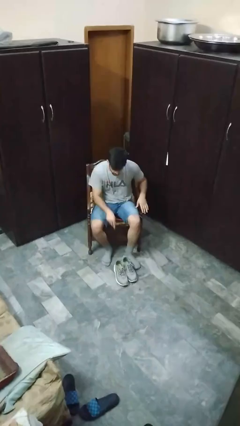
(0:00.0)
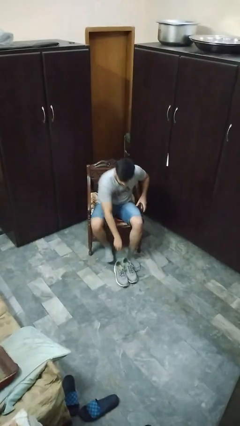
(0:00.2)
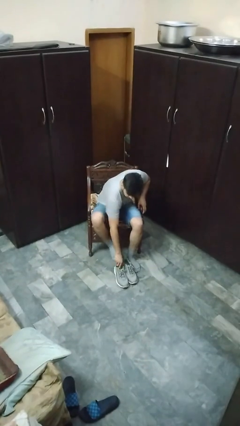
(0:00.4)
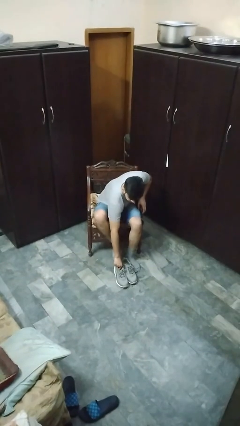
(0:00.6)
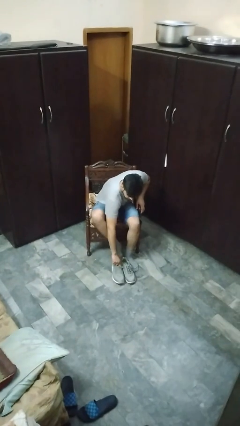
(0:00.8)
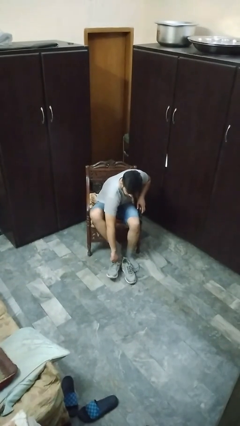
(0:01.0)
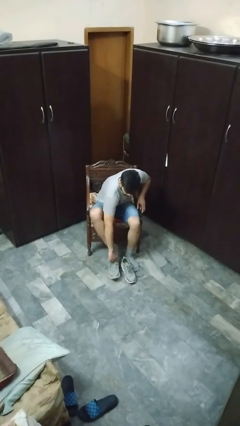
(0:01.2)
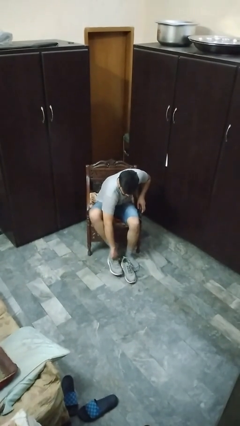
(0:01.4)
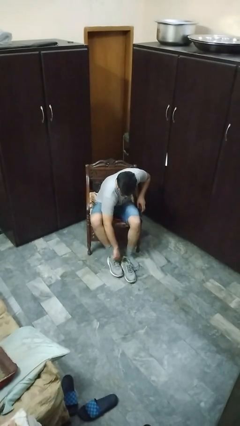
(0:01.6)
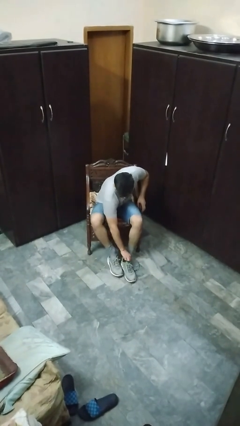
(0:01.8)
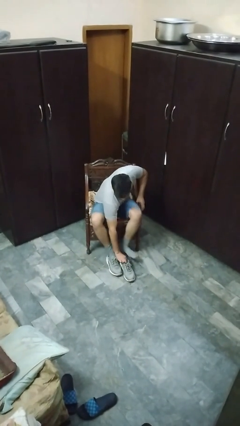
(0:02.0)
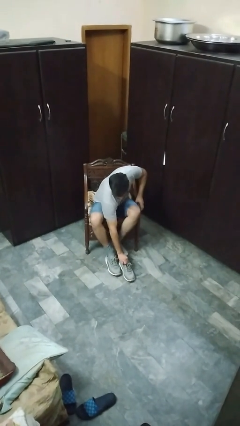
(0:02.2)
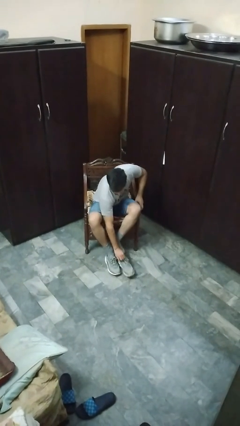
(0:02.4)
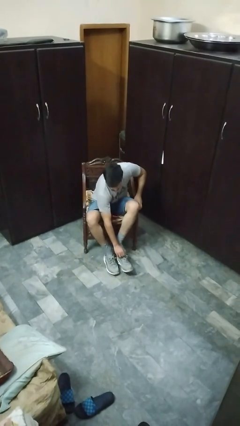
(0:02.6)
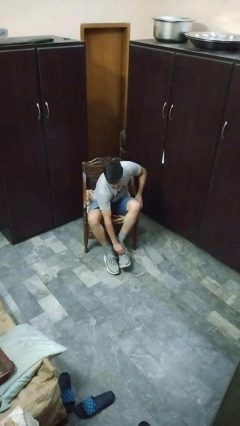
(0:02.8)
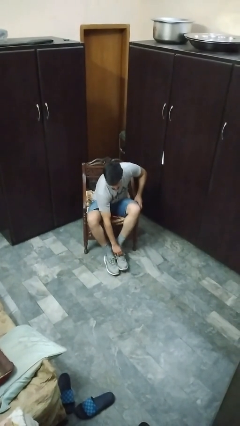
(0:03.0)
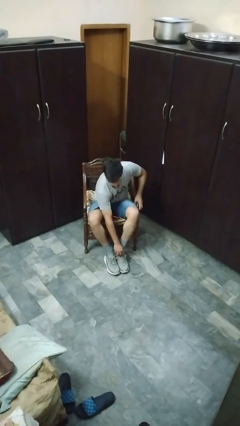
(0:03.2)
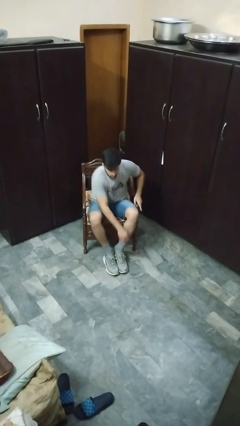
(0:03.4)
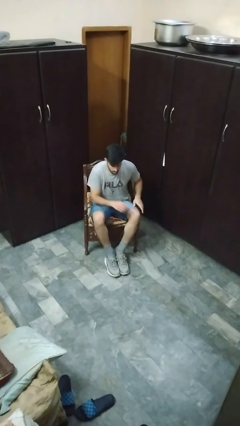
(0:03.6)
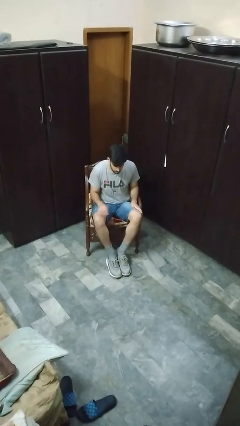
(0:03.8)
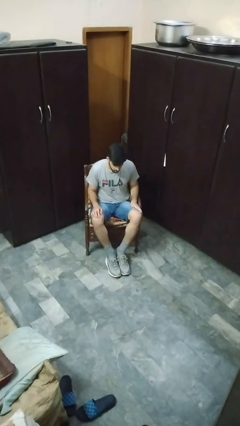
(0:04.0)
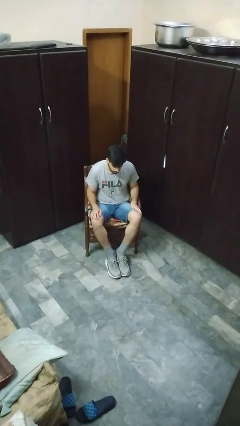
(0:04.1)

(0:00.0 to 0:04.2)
person puts on shoes

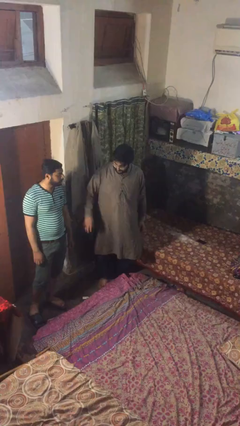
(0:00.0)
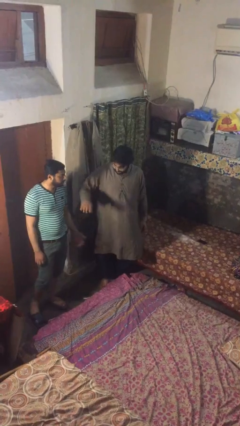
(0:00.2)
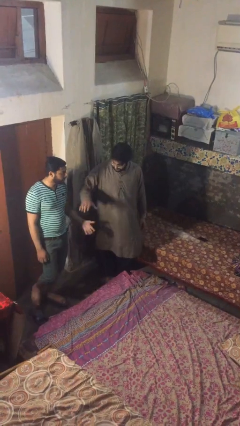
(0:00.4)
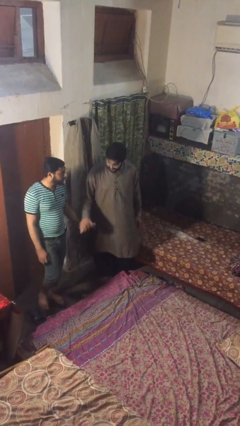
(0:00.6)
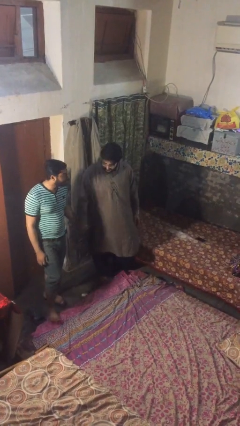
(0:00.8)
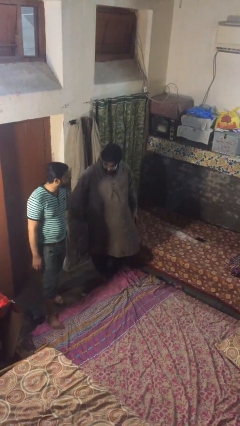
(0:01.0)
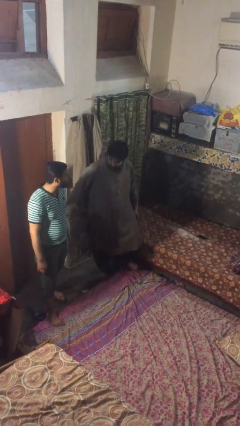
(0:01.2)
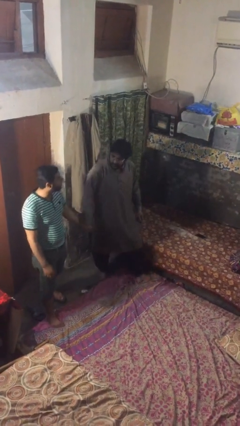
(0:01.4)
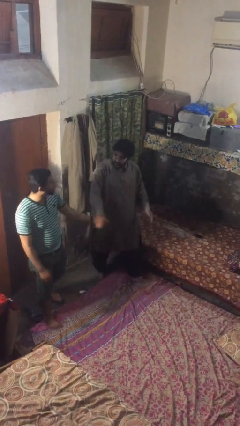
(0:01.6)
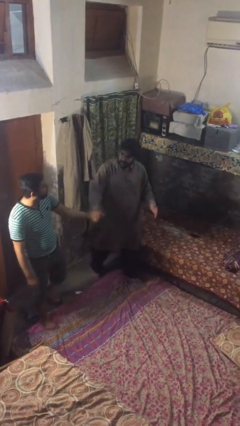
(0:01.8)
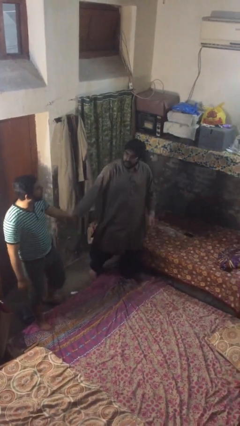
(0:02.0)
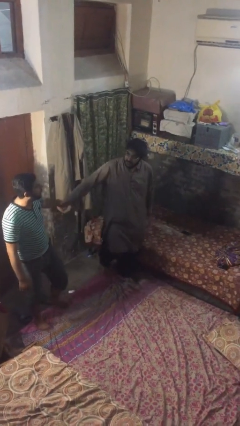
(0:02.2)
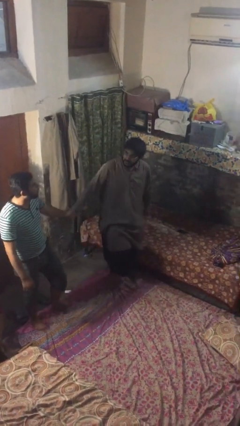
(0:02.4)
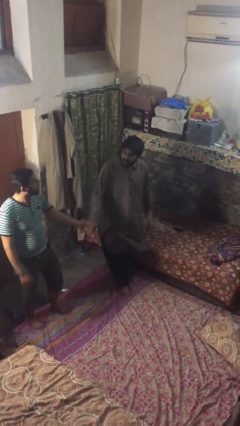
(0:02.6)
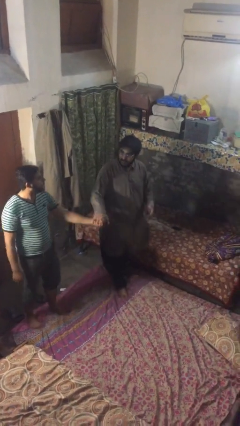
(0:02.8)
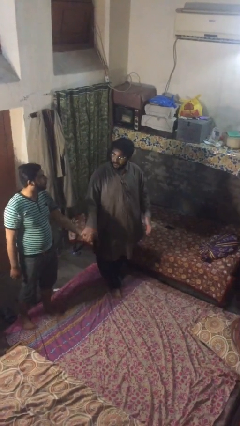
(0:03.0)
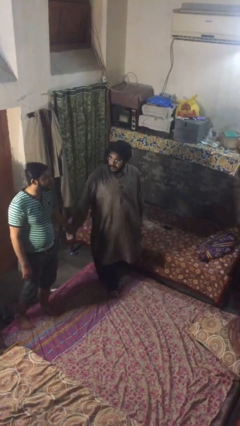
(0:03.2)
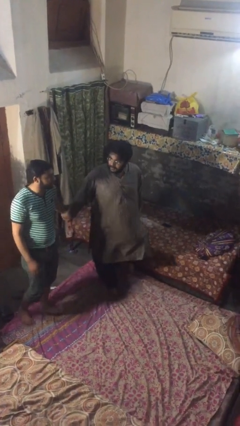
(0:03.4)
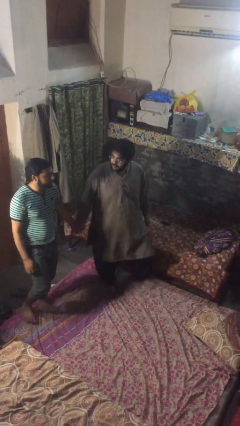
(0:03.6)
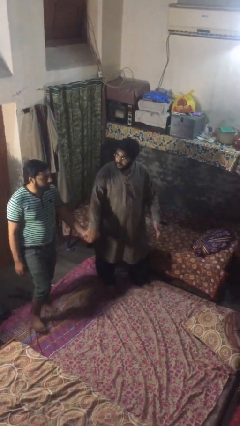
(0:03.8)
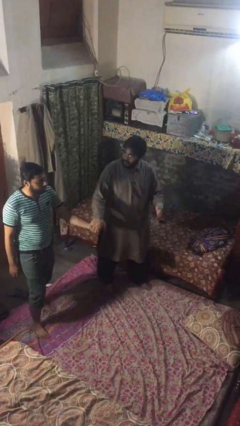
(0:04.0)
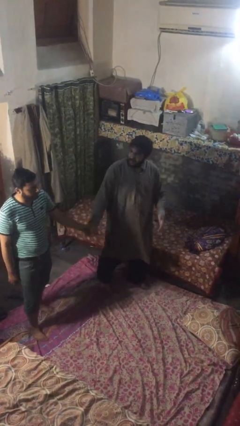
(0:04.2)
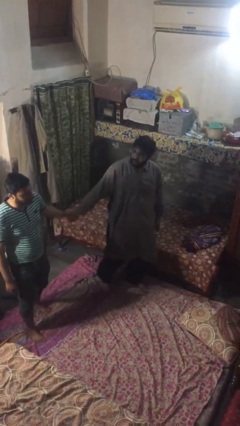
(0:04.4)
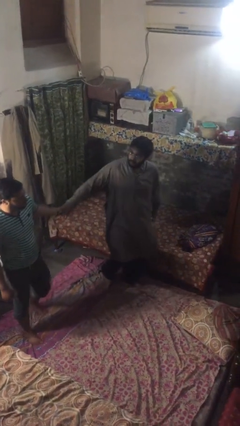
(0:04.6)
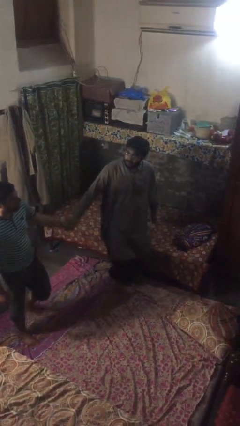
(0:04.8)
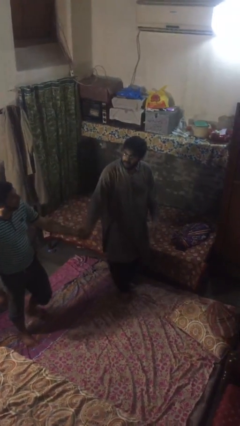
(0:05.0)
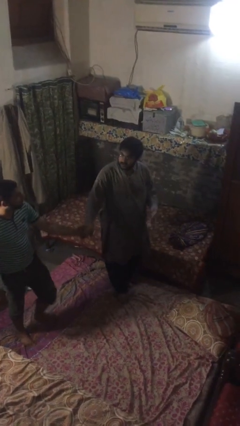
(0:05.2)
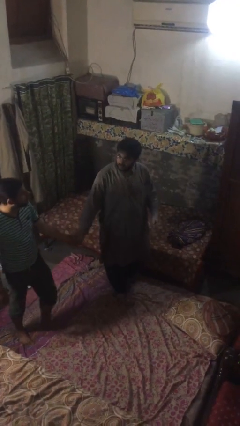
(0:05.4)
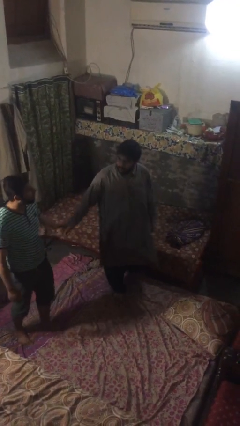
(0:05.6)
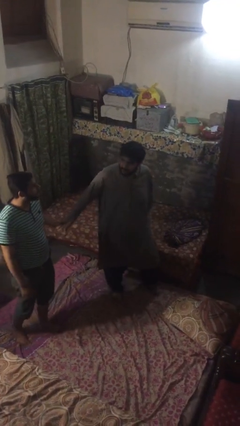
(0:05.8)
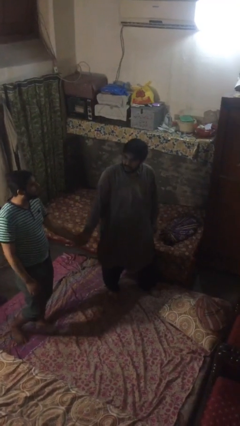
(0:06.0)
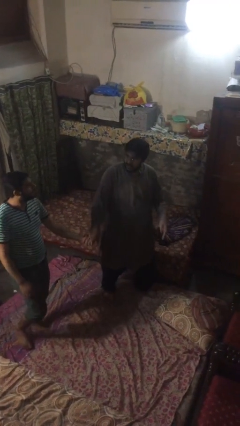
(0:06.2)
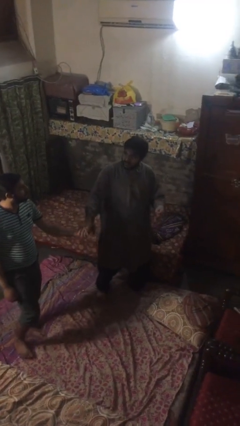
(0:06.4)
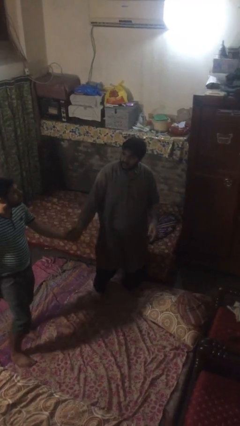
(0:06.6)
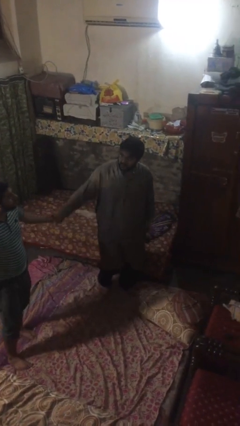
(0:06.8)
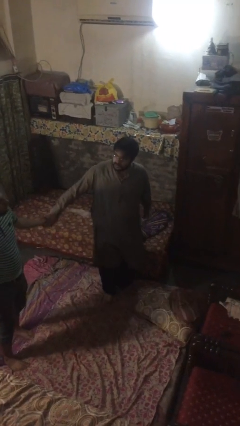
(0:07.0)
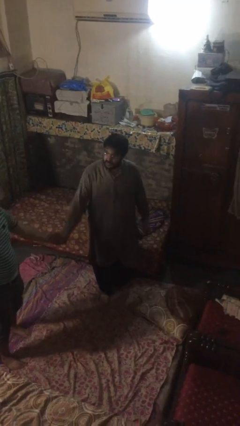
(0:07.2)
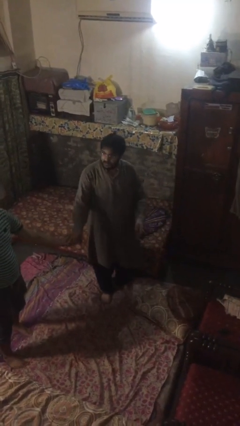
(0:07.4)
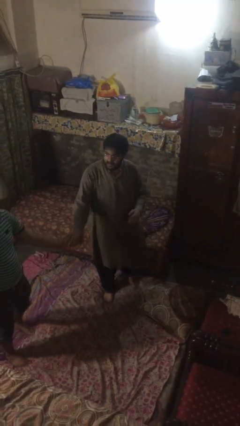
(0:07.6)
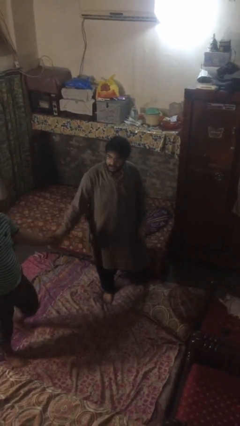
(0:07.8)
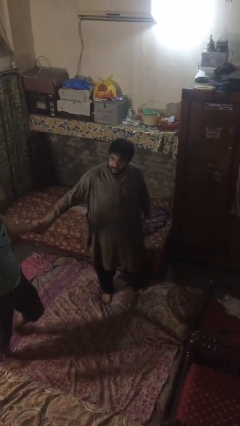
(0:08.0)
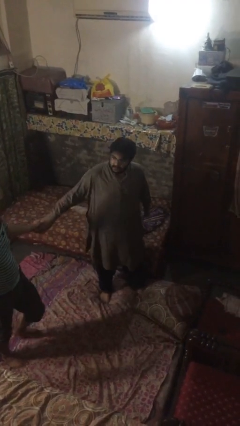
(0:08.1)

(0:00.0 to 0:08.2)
person holds hand

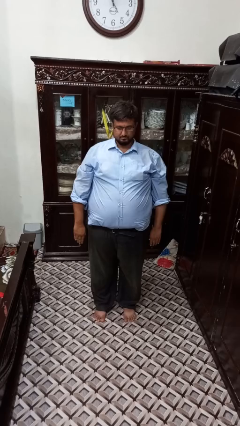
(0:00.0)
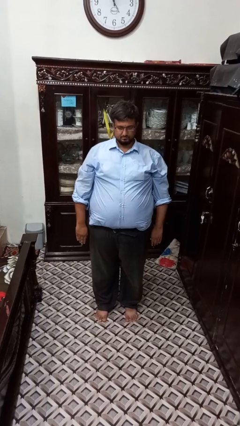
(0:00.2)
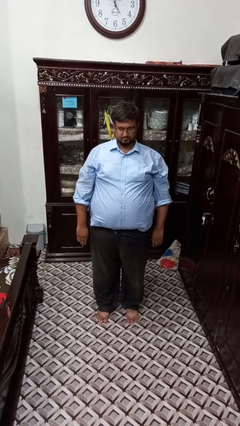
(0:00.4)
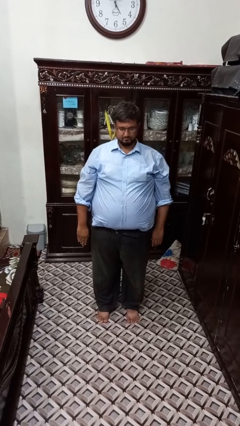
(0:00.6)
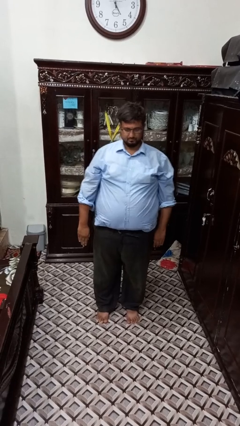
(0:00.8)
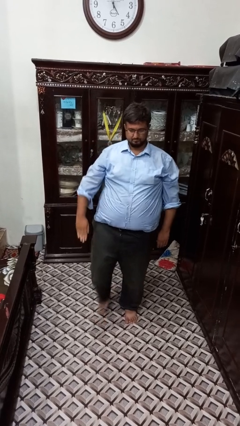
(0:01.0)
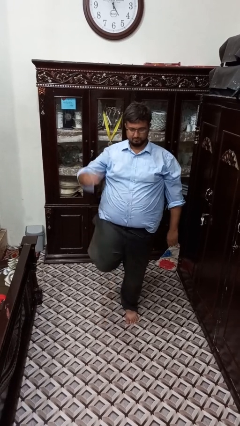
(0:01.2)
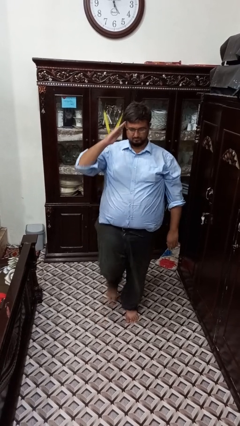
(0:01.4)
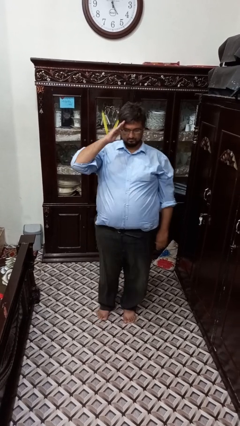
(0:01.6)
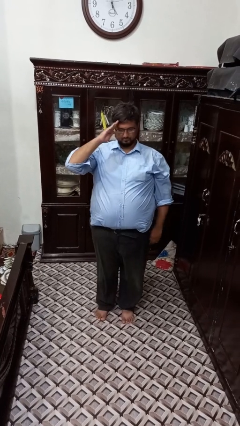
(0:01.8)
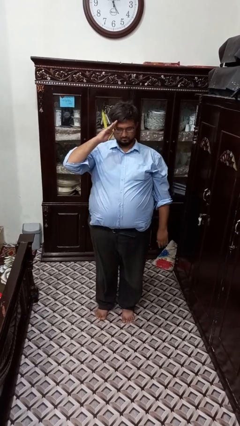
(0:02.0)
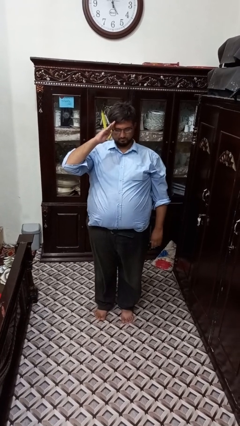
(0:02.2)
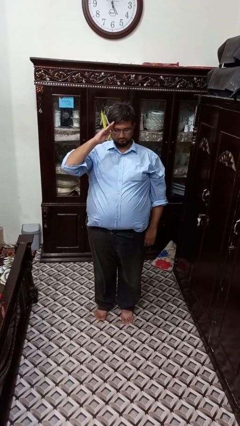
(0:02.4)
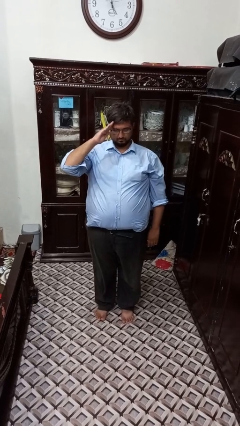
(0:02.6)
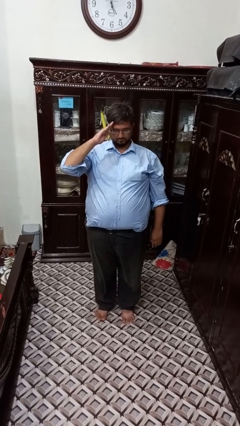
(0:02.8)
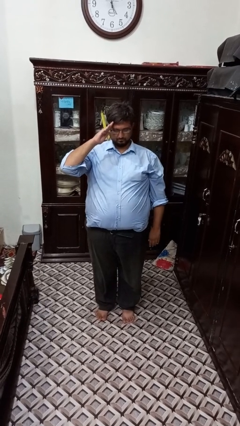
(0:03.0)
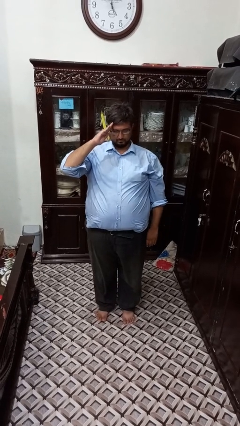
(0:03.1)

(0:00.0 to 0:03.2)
person salutes

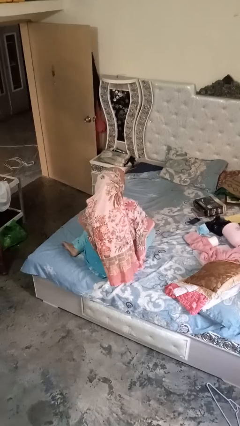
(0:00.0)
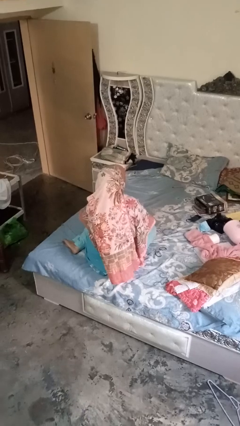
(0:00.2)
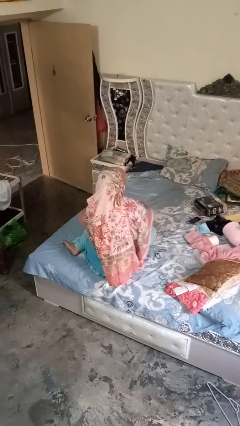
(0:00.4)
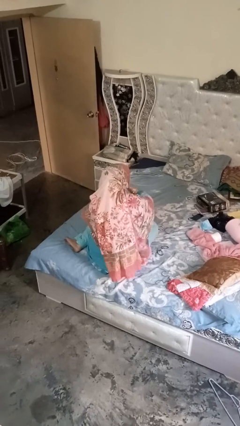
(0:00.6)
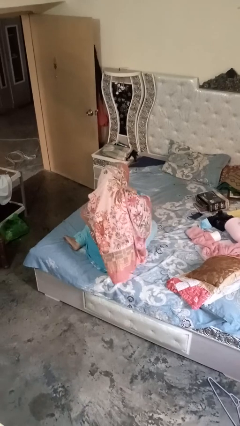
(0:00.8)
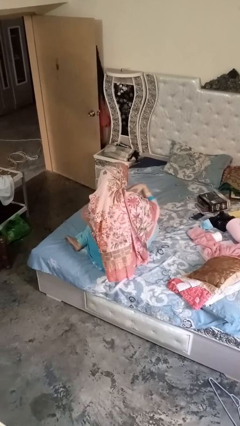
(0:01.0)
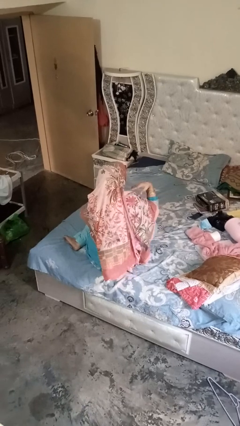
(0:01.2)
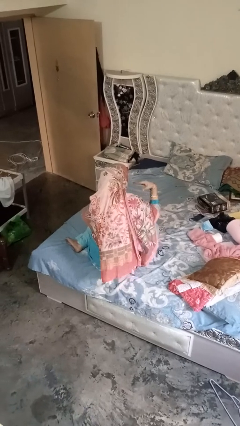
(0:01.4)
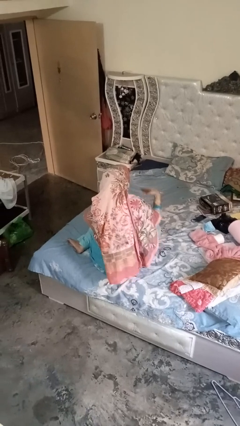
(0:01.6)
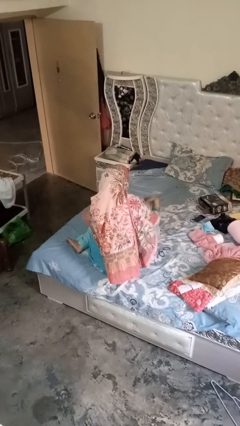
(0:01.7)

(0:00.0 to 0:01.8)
person gestures cut

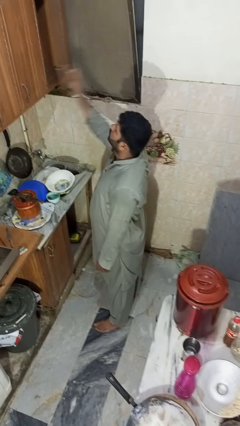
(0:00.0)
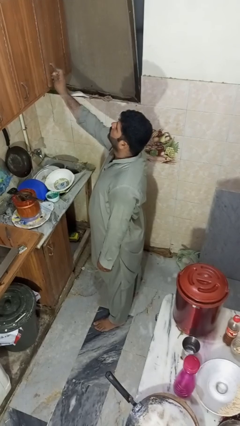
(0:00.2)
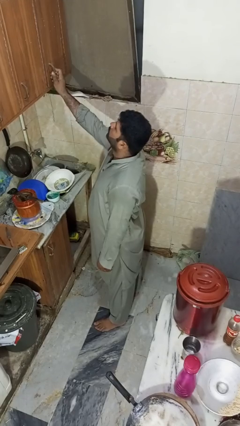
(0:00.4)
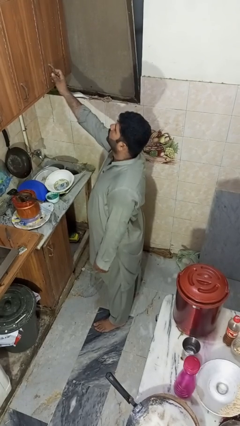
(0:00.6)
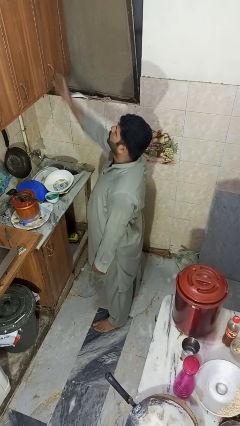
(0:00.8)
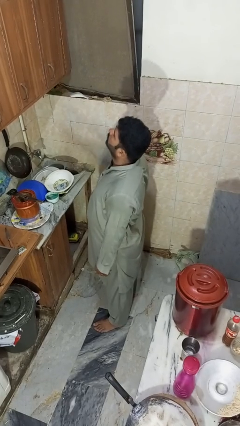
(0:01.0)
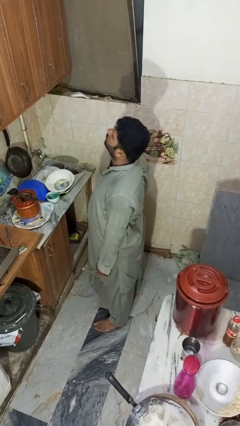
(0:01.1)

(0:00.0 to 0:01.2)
person closes cabinet
